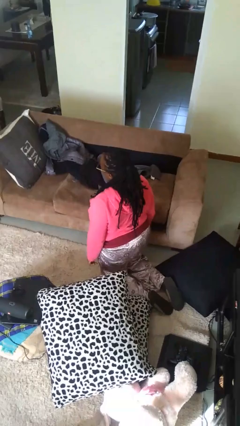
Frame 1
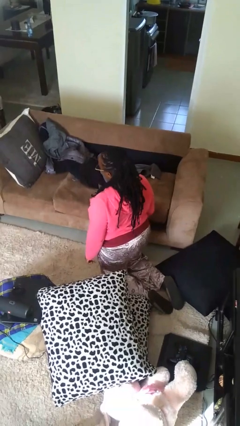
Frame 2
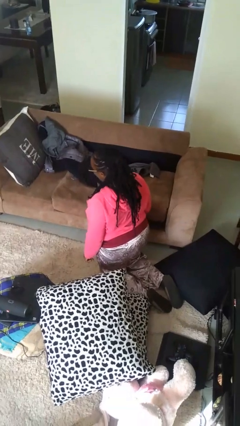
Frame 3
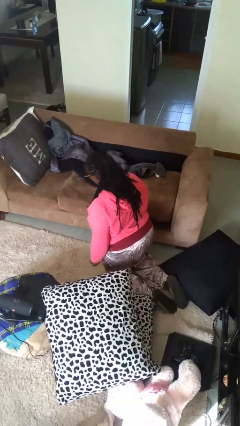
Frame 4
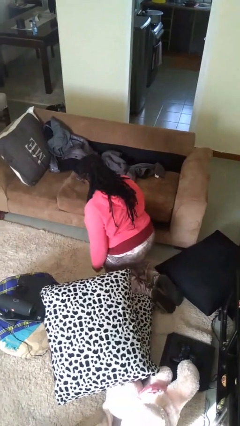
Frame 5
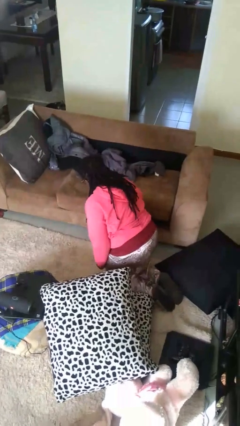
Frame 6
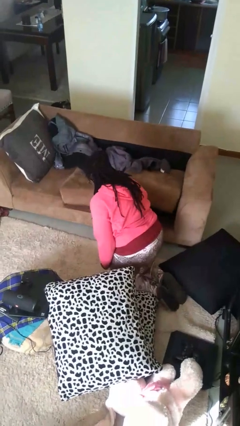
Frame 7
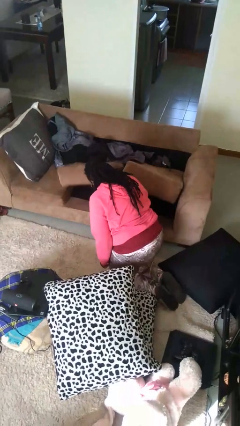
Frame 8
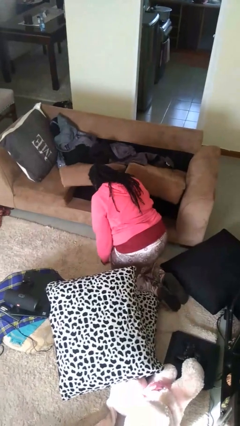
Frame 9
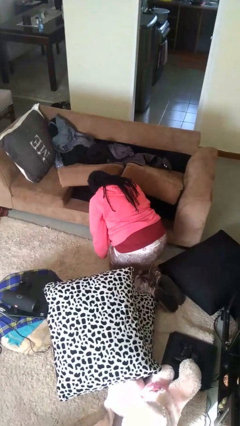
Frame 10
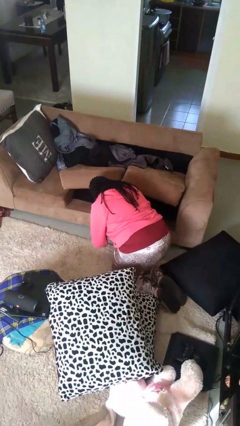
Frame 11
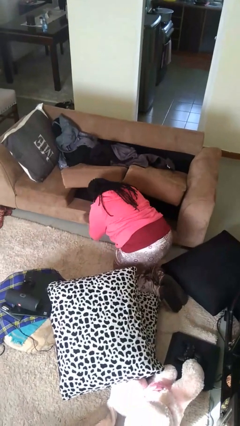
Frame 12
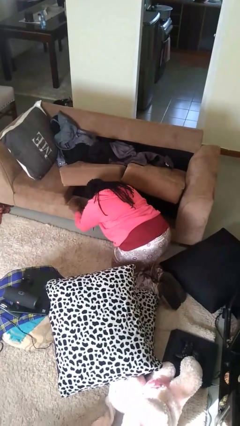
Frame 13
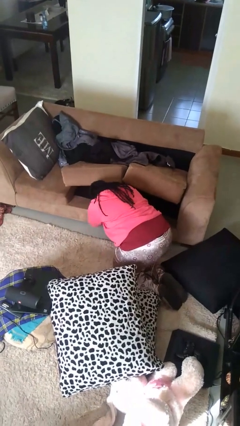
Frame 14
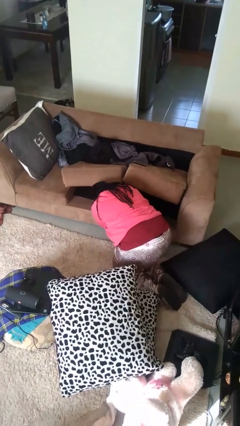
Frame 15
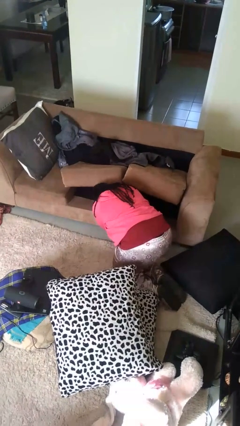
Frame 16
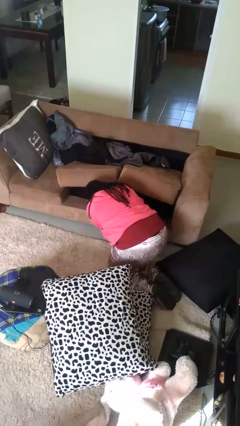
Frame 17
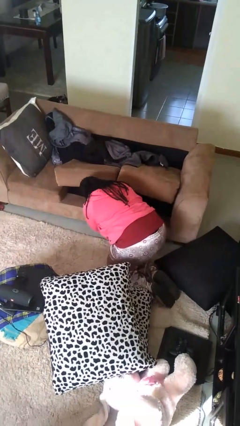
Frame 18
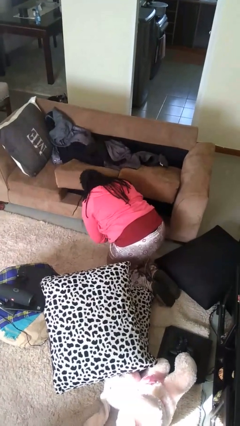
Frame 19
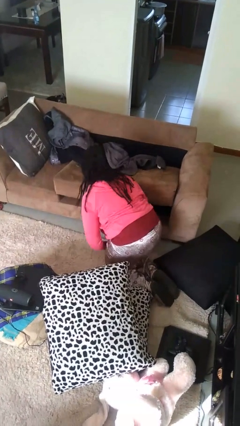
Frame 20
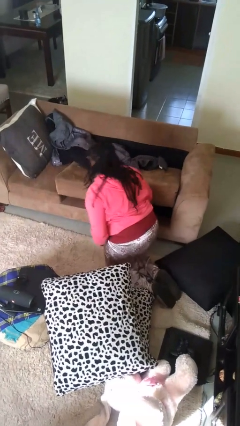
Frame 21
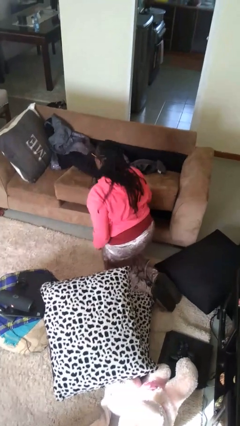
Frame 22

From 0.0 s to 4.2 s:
person searches under couch

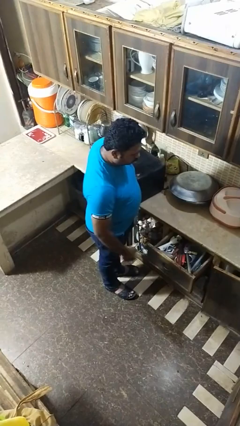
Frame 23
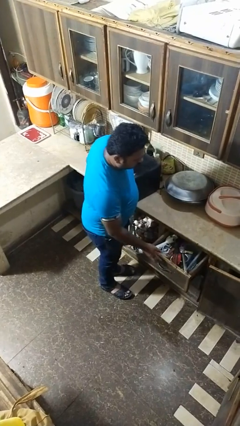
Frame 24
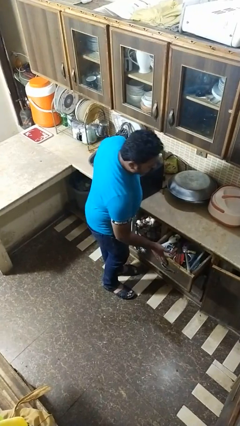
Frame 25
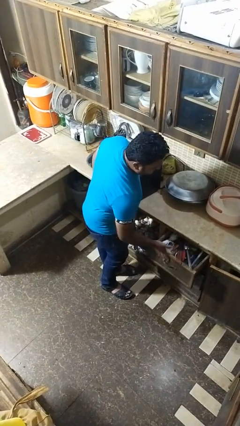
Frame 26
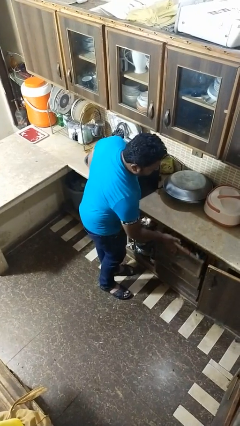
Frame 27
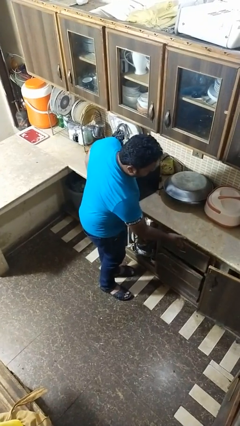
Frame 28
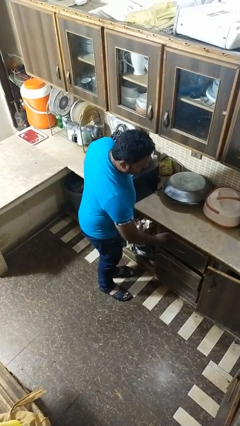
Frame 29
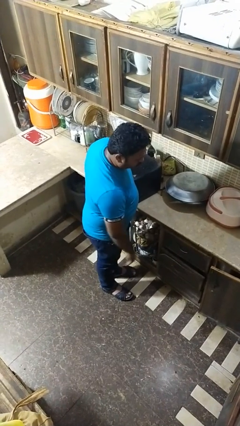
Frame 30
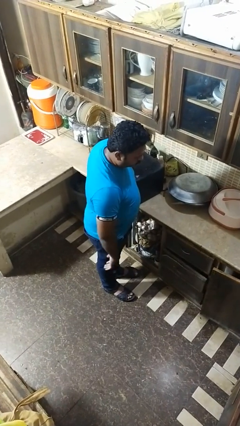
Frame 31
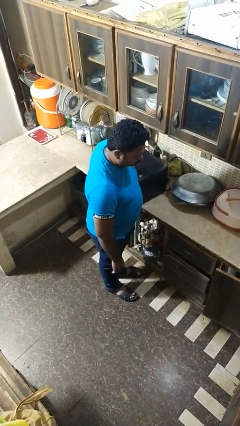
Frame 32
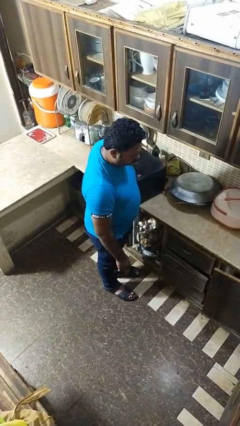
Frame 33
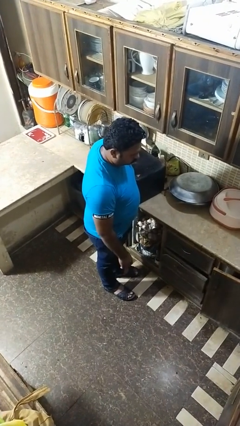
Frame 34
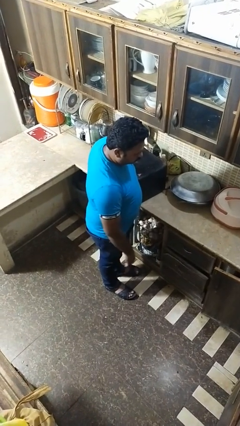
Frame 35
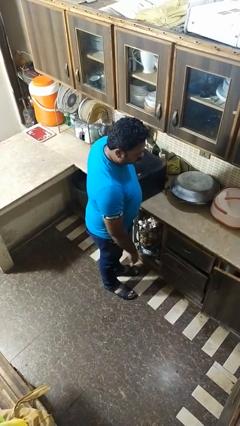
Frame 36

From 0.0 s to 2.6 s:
person closes dresser drawer

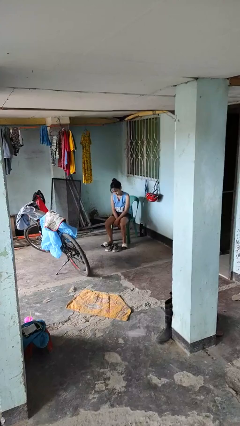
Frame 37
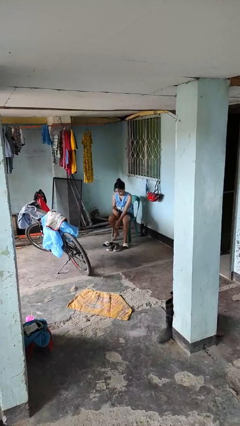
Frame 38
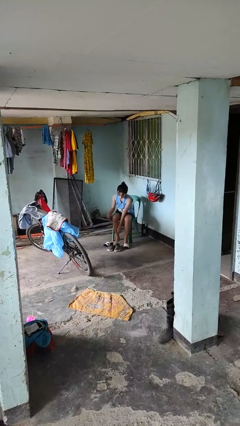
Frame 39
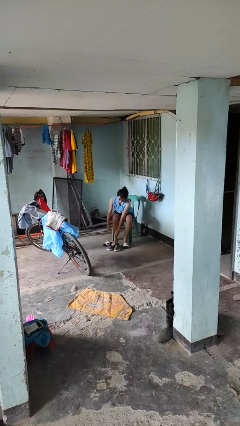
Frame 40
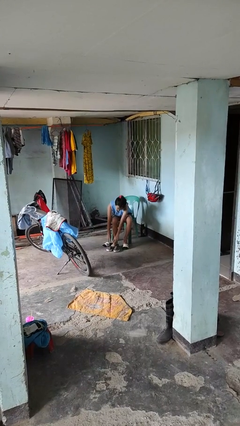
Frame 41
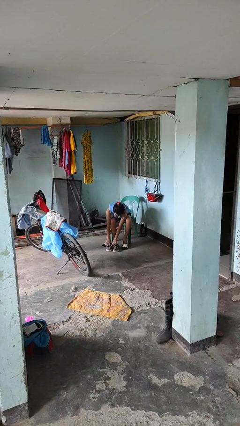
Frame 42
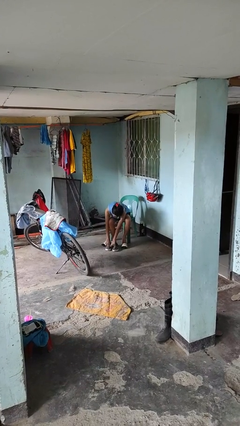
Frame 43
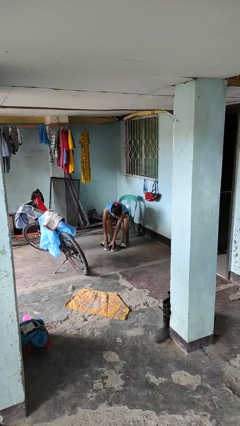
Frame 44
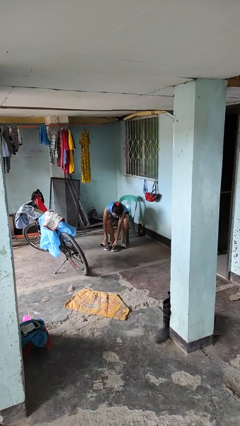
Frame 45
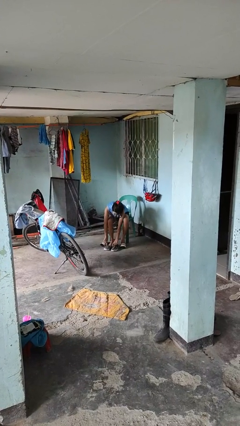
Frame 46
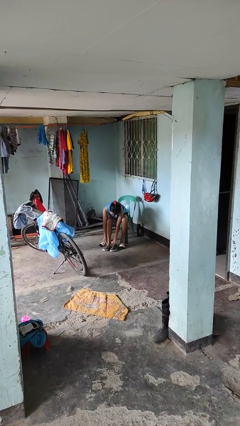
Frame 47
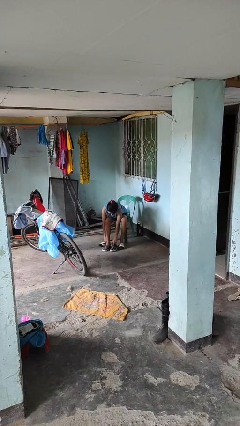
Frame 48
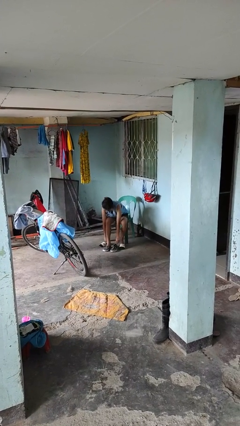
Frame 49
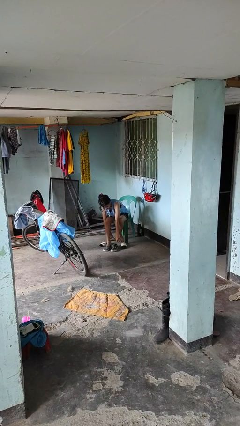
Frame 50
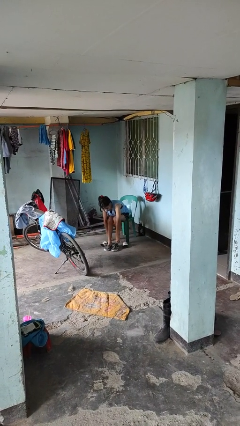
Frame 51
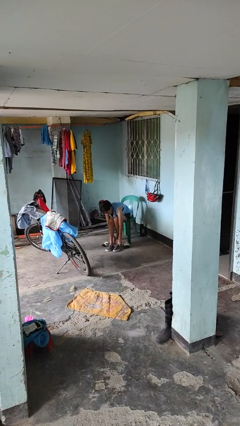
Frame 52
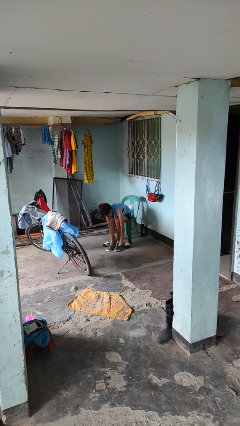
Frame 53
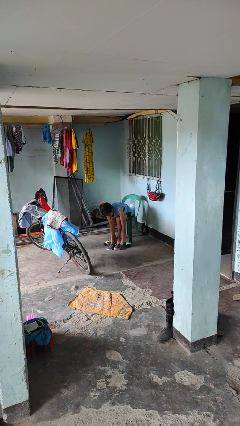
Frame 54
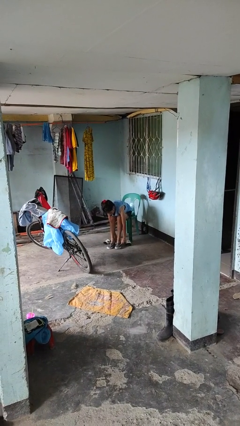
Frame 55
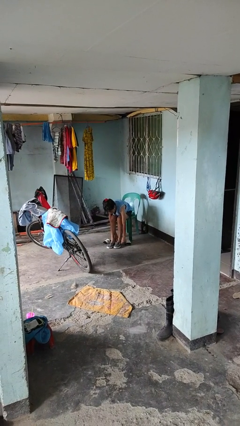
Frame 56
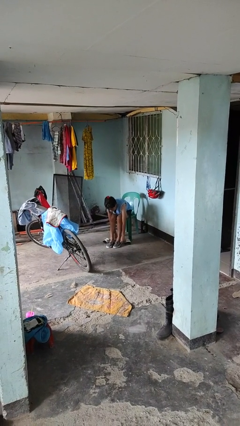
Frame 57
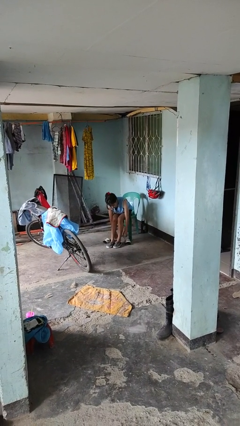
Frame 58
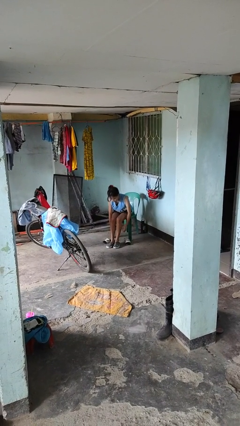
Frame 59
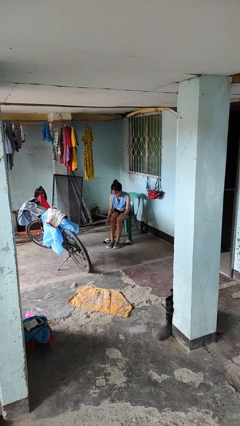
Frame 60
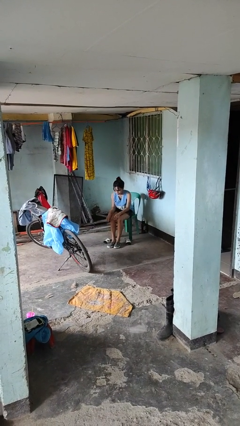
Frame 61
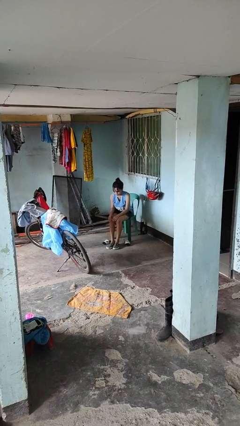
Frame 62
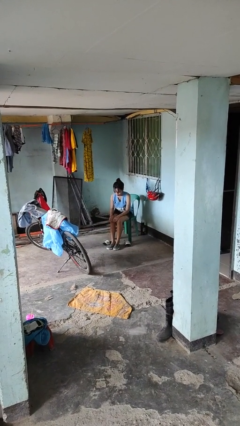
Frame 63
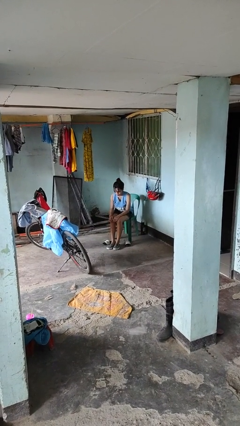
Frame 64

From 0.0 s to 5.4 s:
person puts on shoes

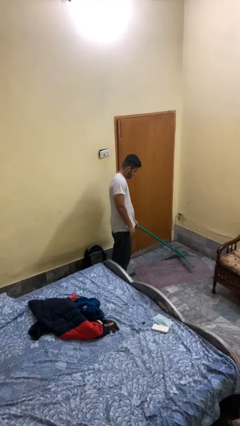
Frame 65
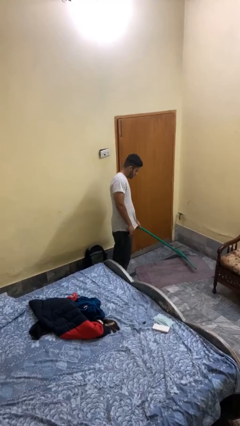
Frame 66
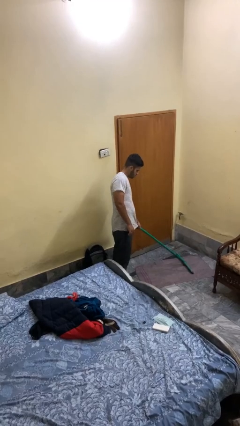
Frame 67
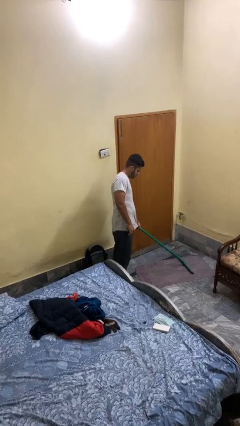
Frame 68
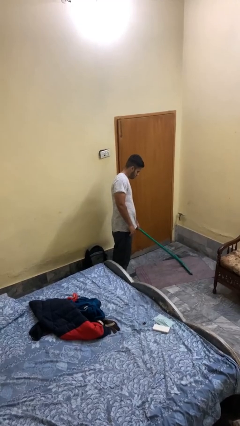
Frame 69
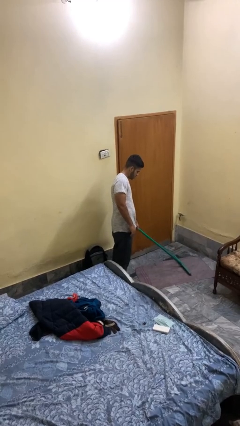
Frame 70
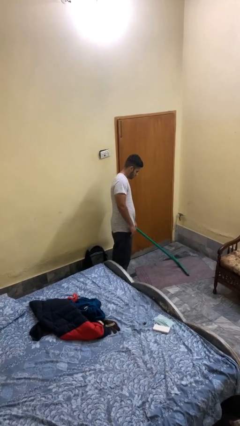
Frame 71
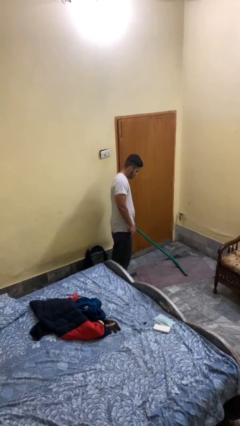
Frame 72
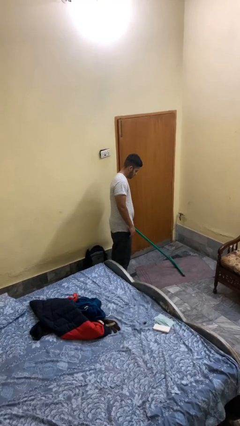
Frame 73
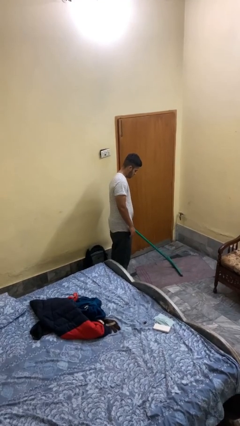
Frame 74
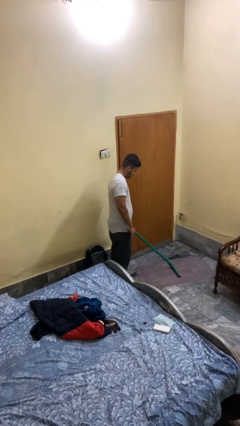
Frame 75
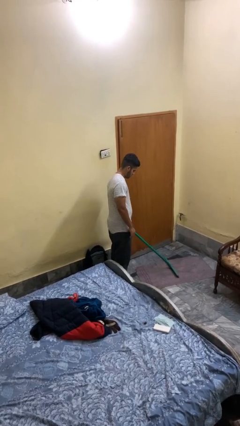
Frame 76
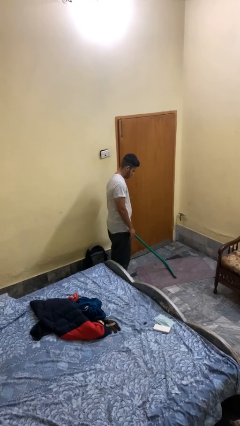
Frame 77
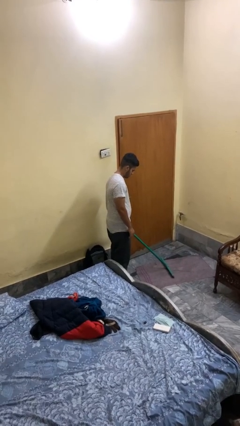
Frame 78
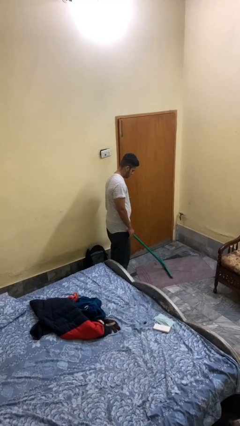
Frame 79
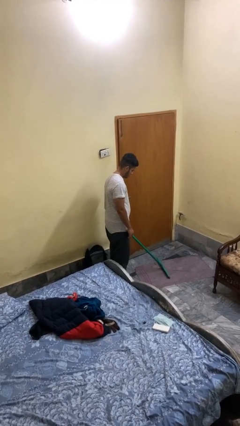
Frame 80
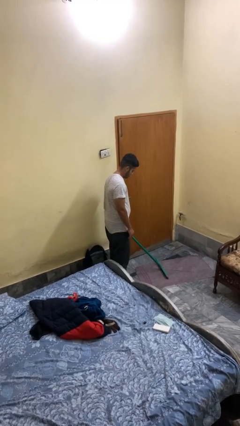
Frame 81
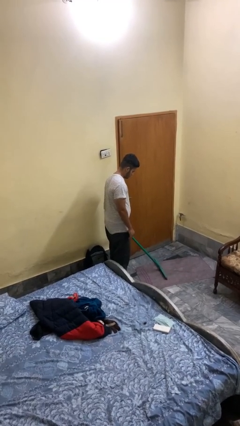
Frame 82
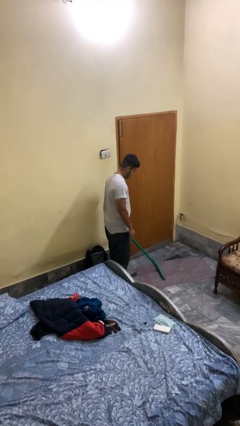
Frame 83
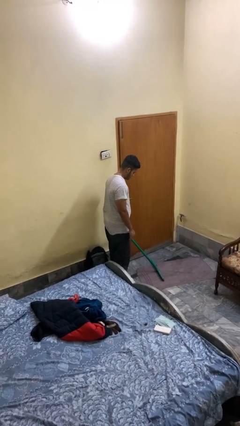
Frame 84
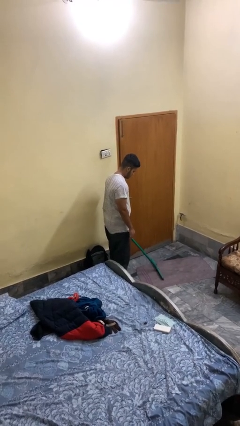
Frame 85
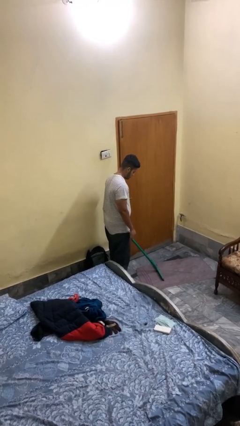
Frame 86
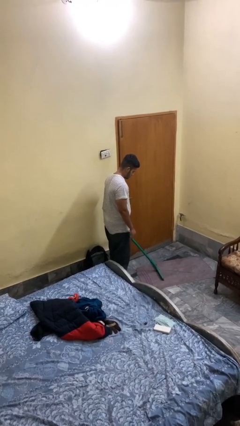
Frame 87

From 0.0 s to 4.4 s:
person vacuums carpet

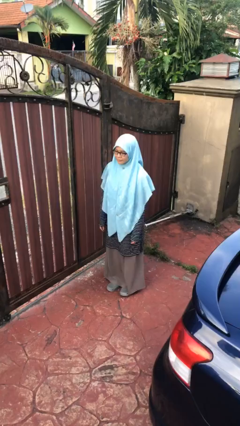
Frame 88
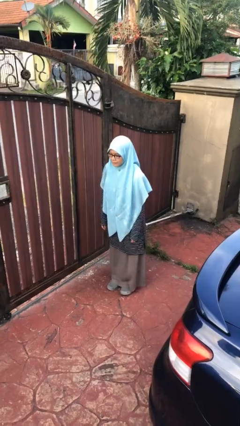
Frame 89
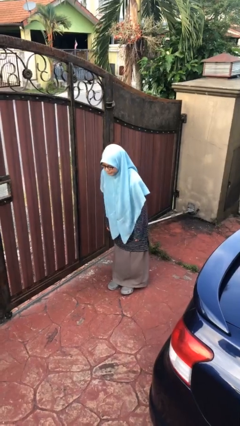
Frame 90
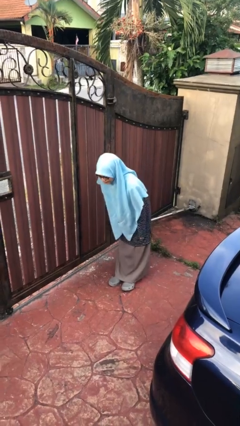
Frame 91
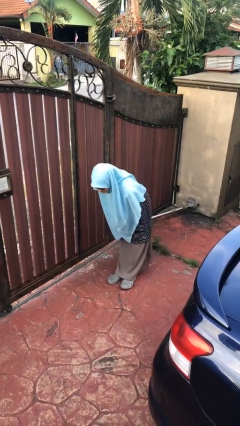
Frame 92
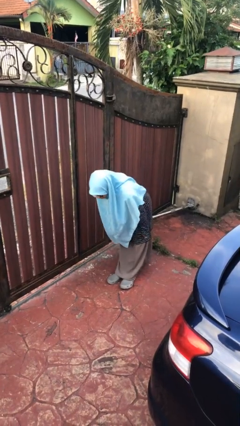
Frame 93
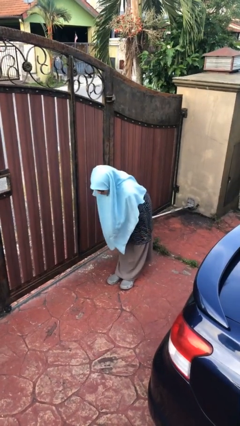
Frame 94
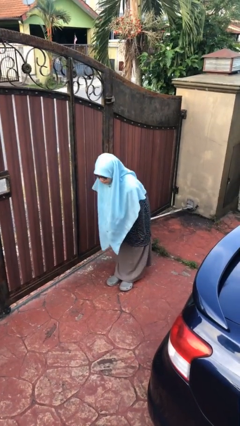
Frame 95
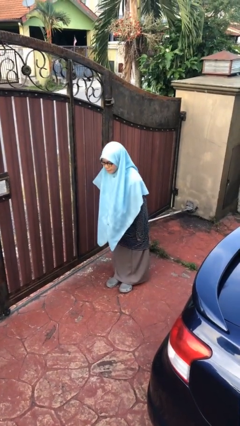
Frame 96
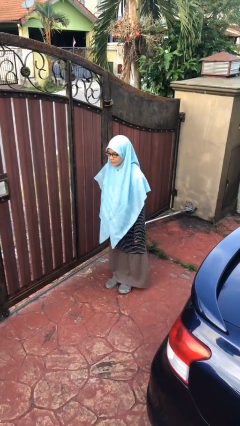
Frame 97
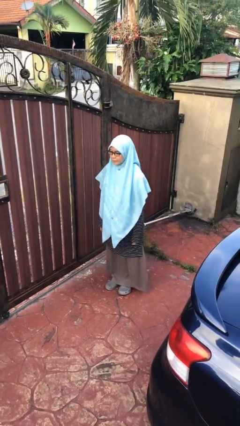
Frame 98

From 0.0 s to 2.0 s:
person bows
